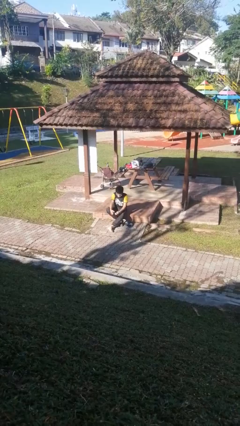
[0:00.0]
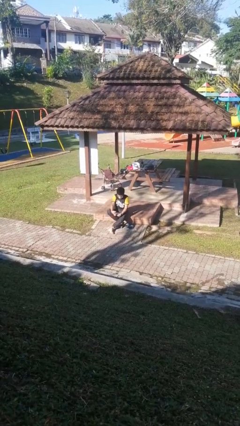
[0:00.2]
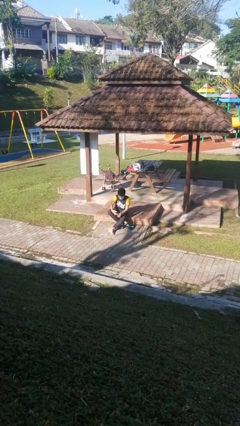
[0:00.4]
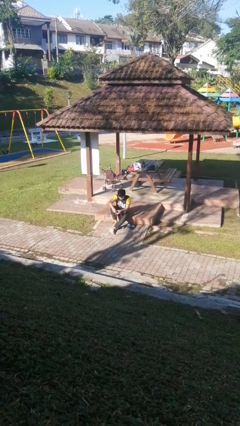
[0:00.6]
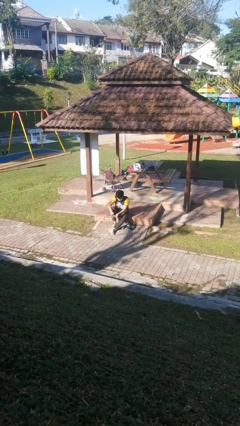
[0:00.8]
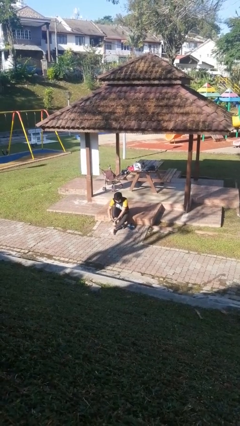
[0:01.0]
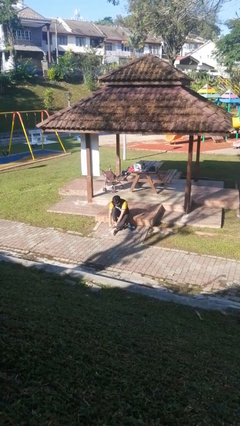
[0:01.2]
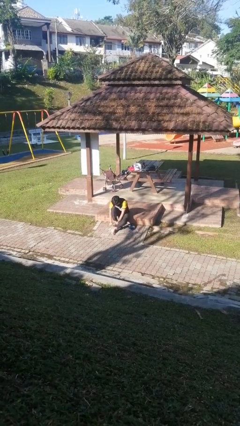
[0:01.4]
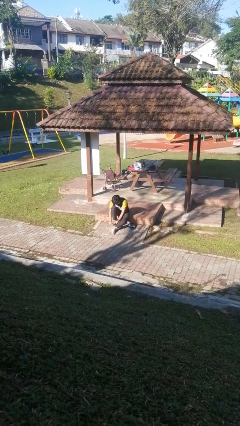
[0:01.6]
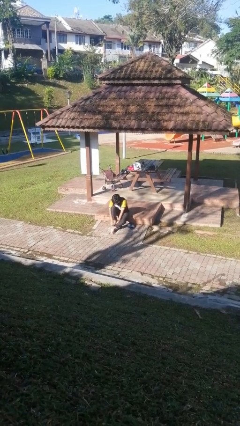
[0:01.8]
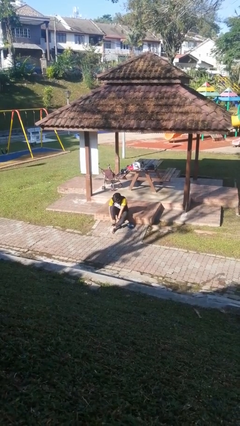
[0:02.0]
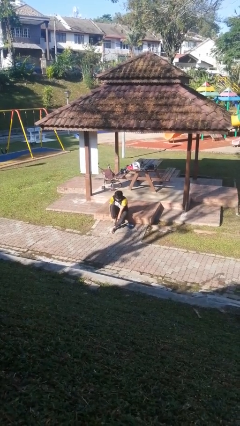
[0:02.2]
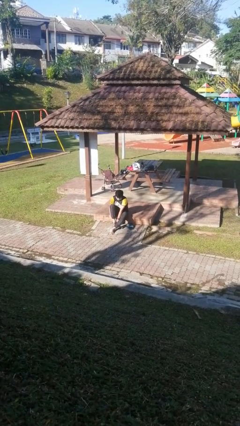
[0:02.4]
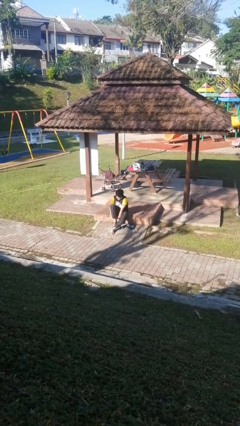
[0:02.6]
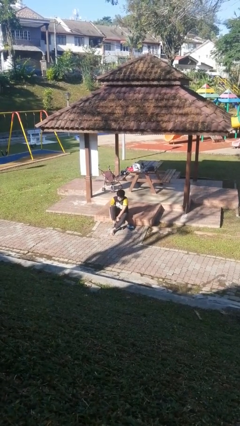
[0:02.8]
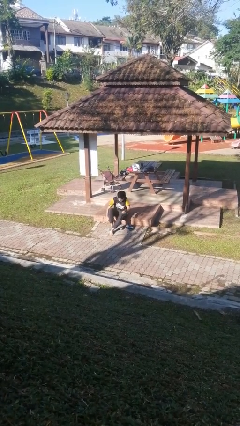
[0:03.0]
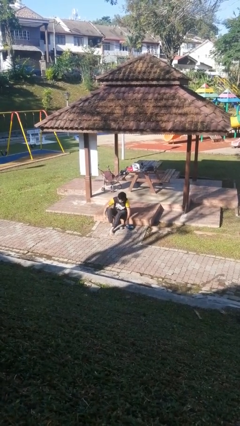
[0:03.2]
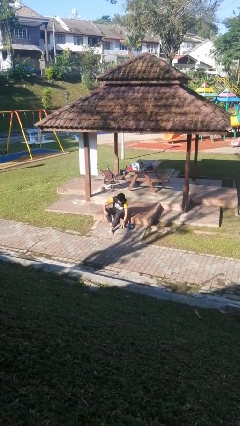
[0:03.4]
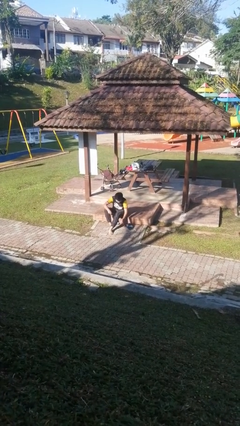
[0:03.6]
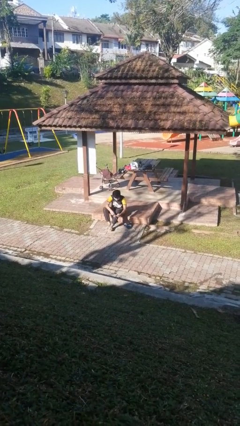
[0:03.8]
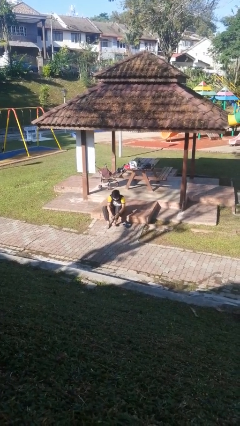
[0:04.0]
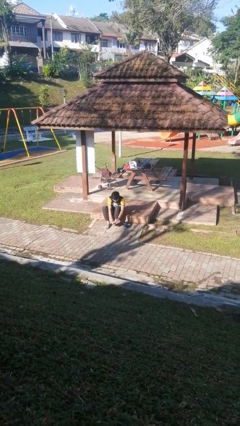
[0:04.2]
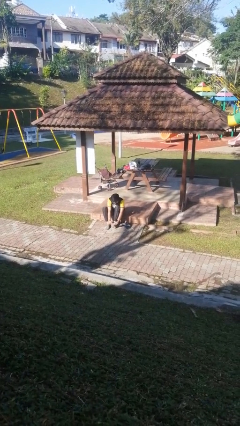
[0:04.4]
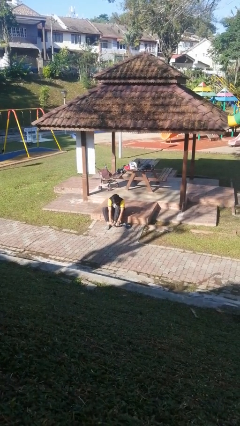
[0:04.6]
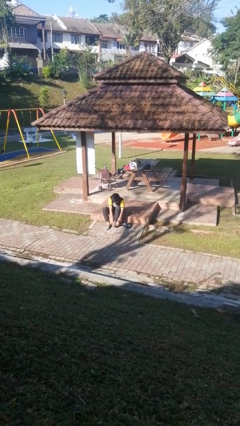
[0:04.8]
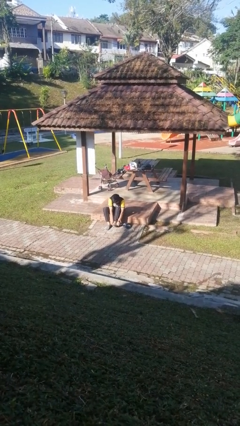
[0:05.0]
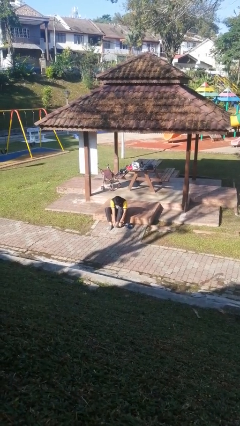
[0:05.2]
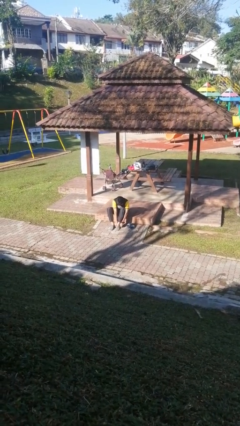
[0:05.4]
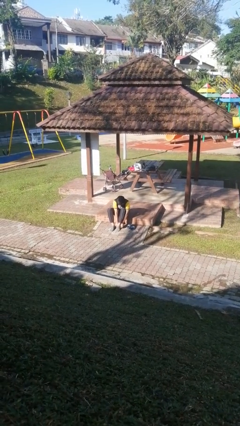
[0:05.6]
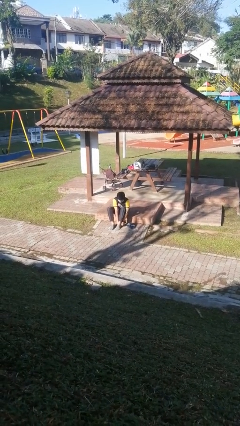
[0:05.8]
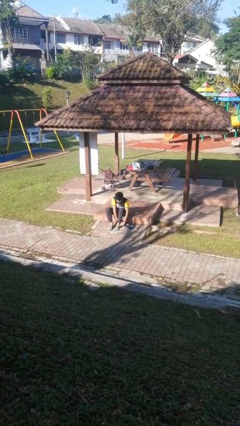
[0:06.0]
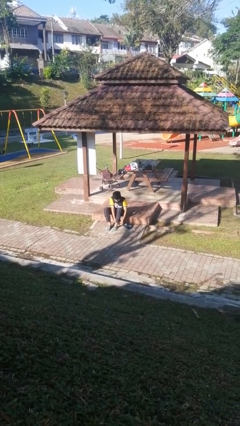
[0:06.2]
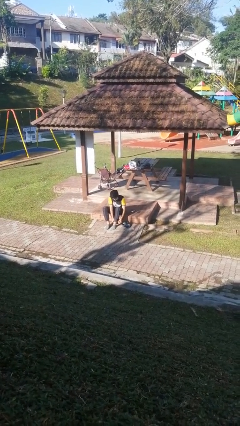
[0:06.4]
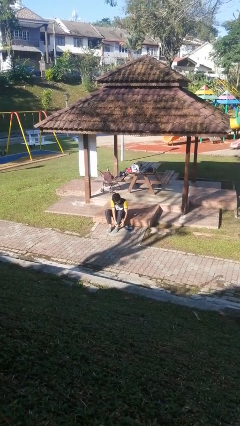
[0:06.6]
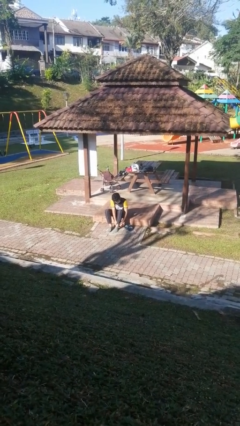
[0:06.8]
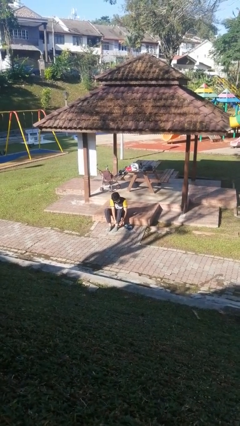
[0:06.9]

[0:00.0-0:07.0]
person puts on socks

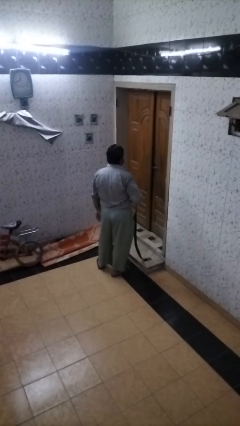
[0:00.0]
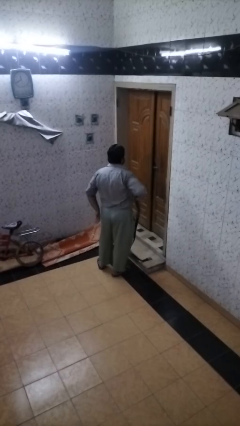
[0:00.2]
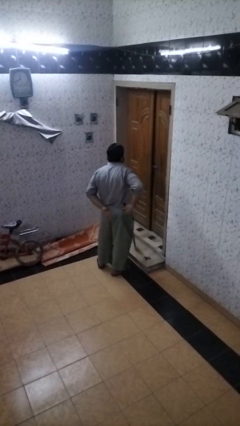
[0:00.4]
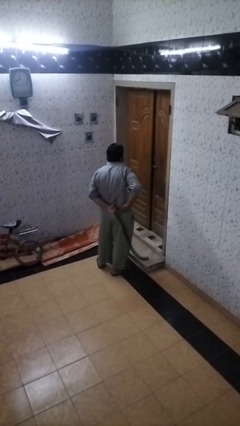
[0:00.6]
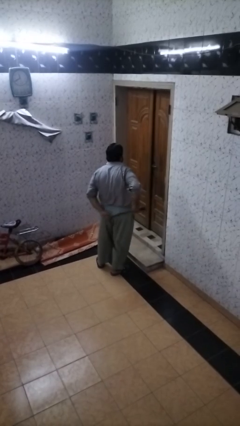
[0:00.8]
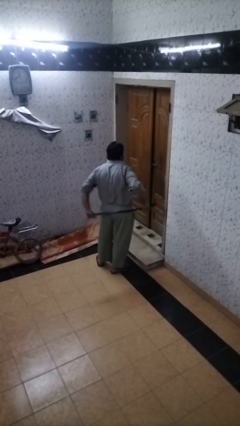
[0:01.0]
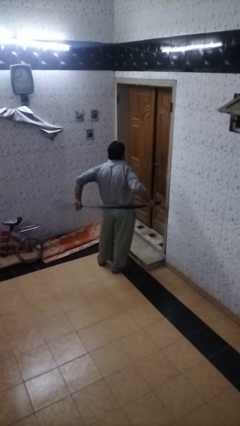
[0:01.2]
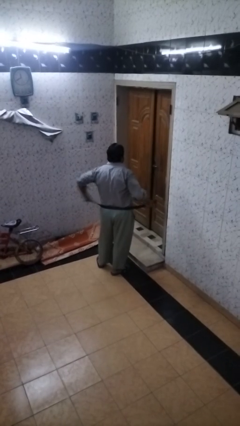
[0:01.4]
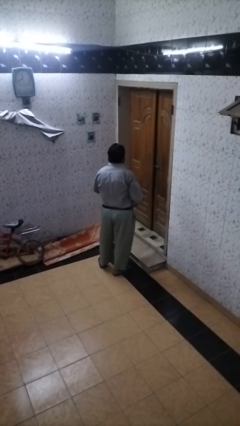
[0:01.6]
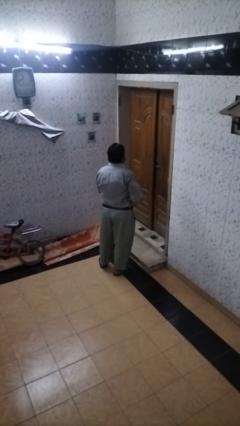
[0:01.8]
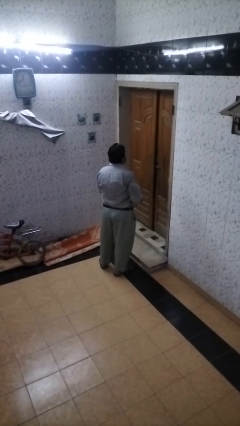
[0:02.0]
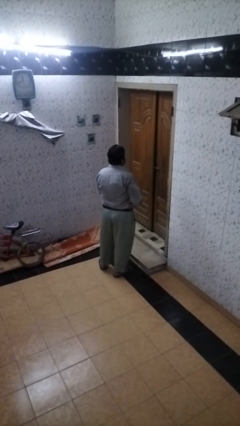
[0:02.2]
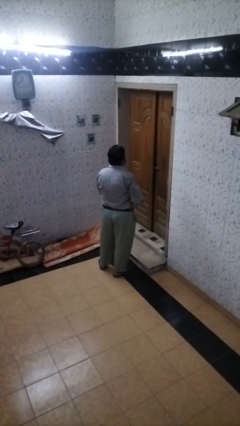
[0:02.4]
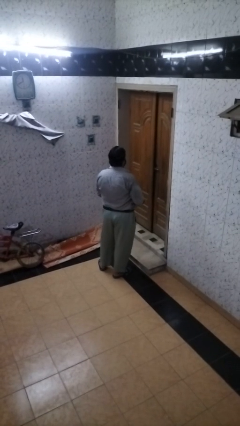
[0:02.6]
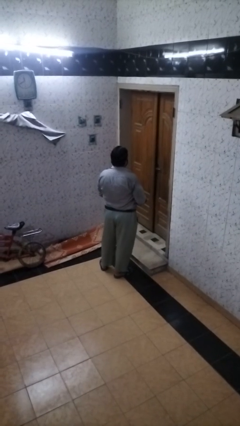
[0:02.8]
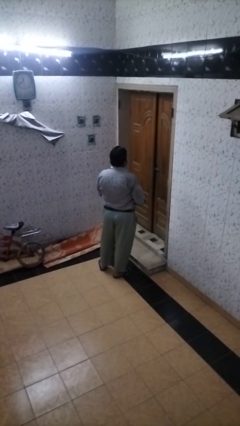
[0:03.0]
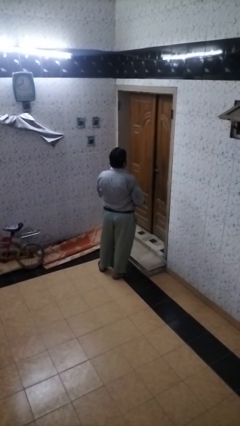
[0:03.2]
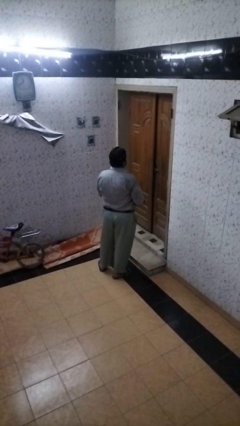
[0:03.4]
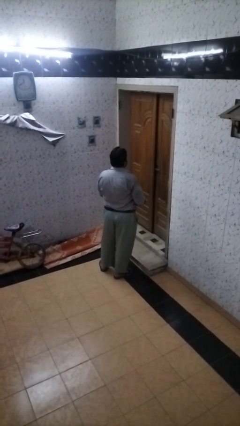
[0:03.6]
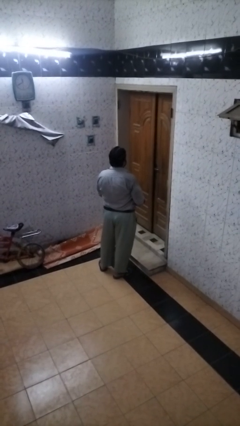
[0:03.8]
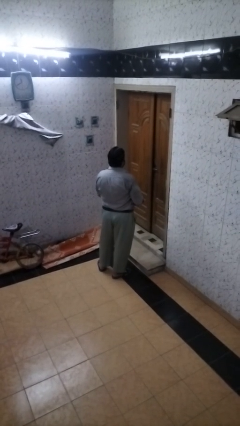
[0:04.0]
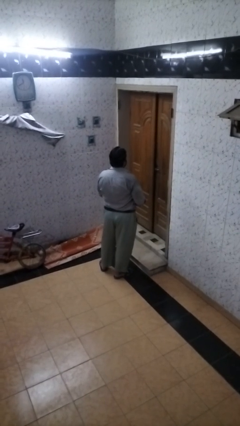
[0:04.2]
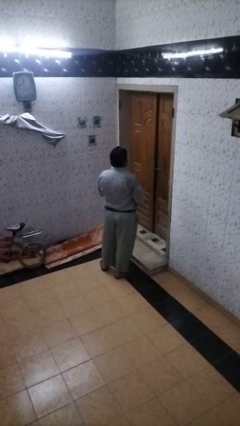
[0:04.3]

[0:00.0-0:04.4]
person puts on belt

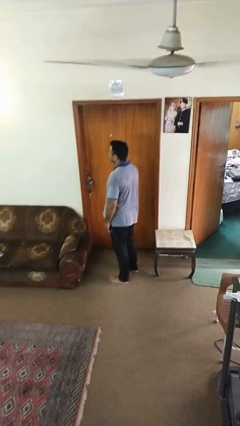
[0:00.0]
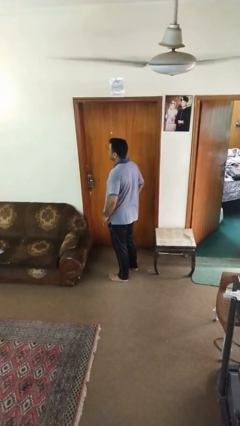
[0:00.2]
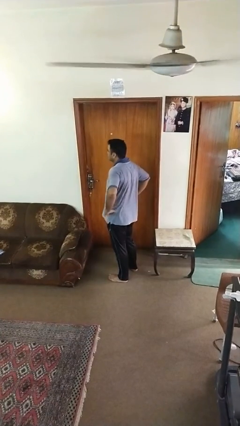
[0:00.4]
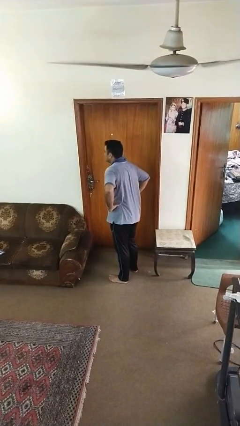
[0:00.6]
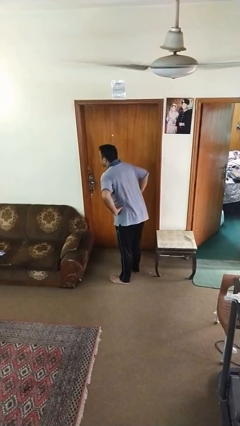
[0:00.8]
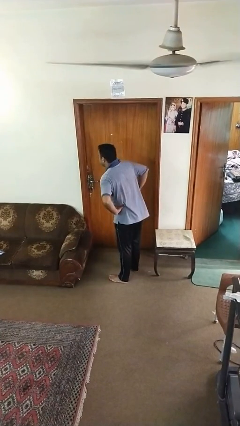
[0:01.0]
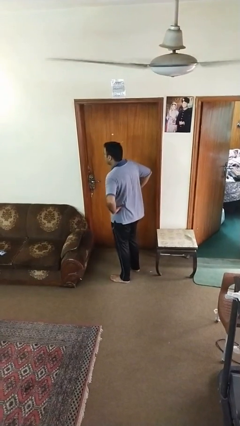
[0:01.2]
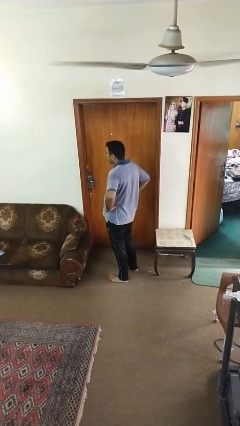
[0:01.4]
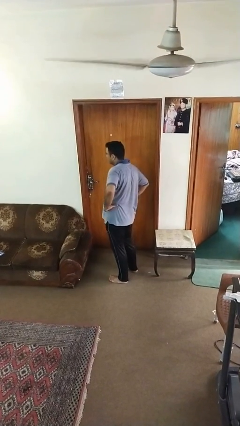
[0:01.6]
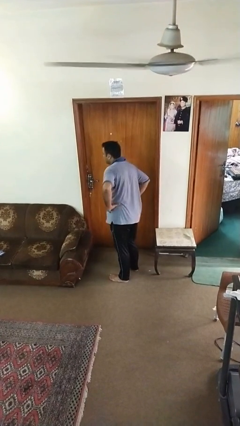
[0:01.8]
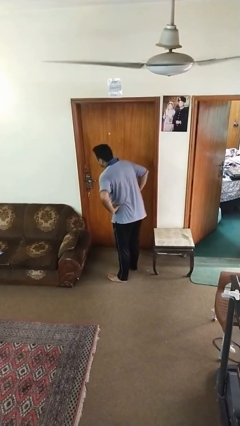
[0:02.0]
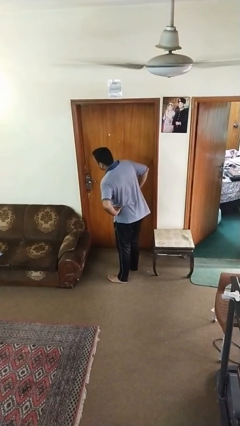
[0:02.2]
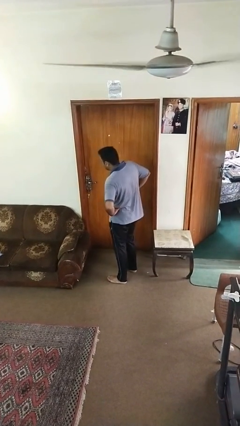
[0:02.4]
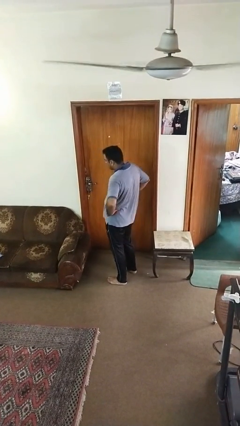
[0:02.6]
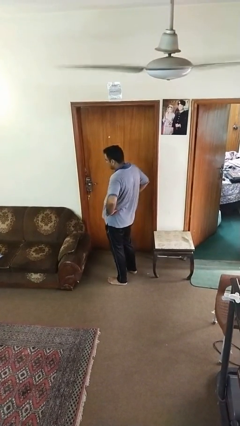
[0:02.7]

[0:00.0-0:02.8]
person wiggles hips

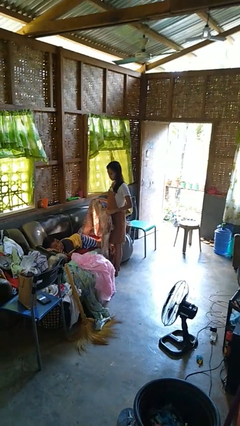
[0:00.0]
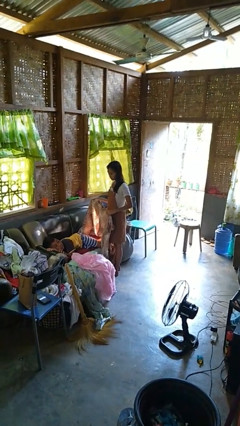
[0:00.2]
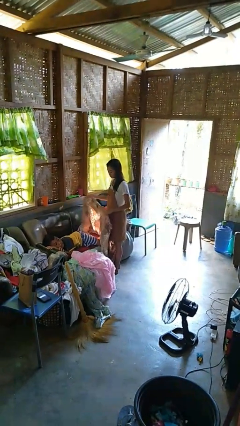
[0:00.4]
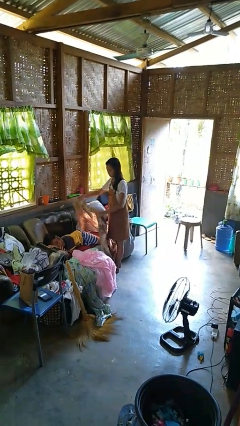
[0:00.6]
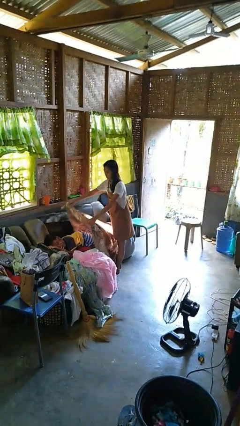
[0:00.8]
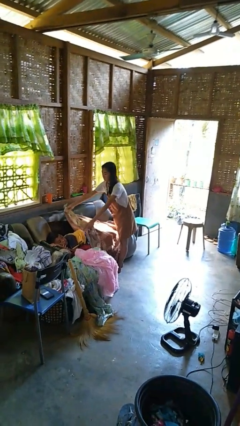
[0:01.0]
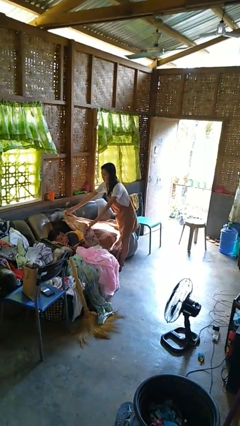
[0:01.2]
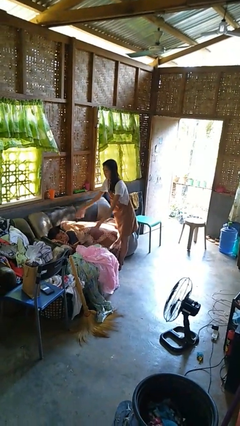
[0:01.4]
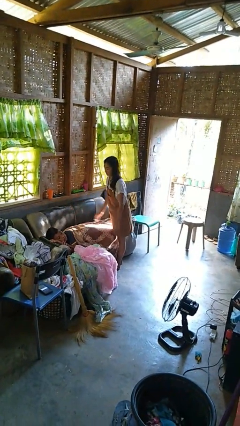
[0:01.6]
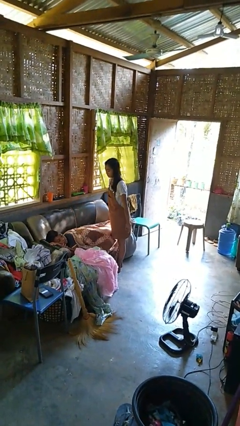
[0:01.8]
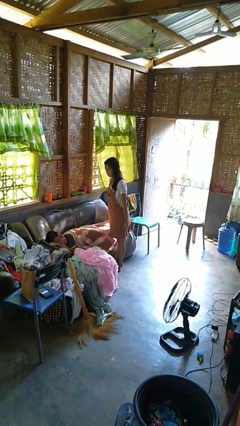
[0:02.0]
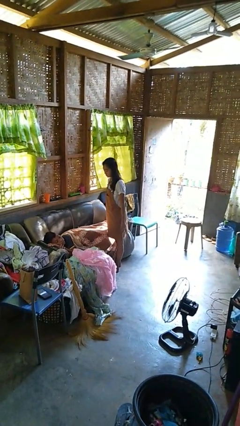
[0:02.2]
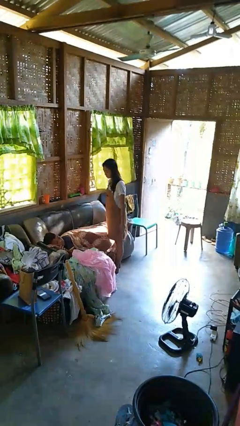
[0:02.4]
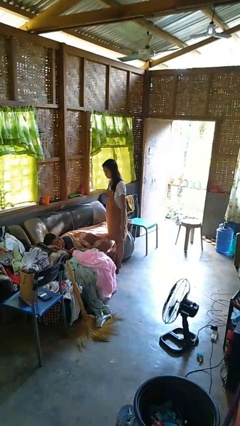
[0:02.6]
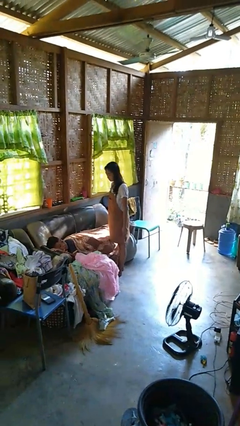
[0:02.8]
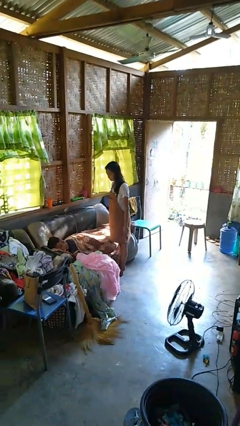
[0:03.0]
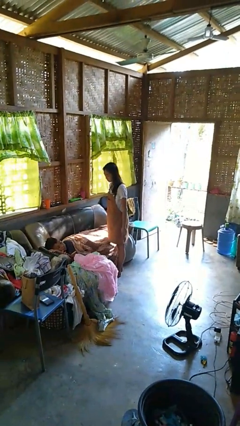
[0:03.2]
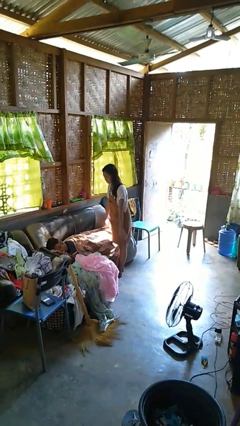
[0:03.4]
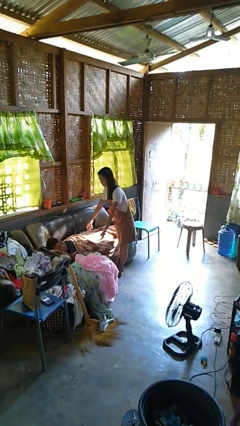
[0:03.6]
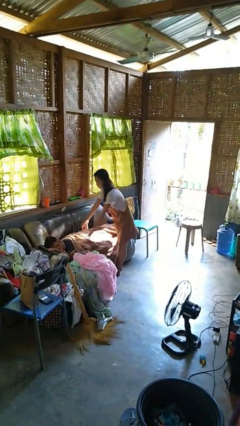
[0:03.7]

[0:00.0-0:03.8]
person covers friend with blanket
